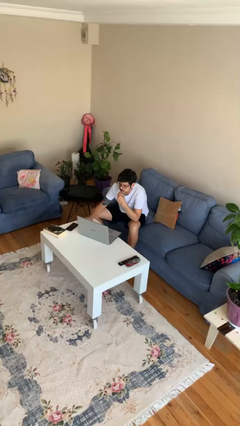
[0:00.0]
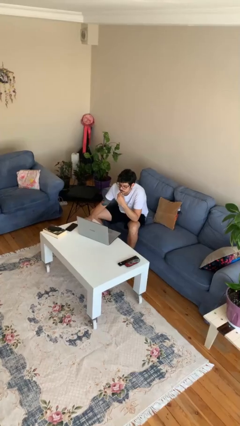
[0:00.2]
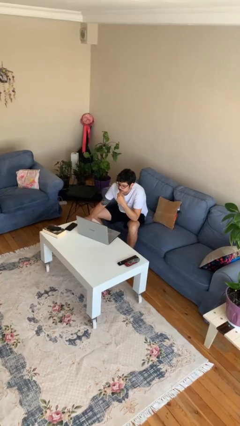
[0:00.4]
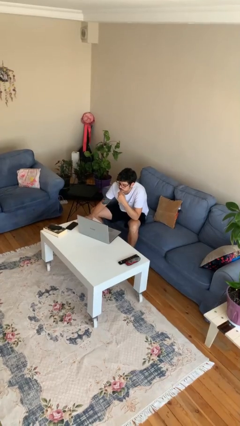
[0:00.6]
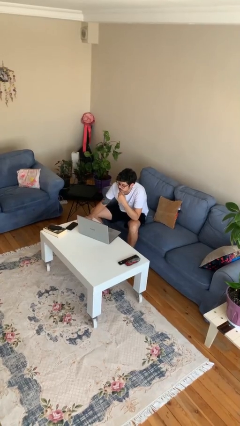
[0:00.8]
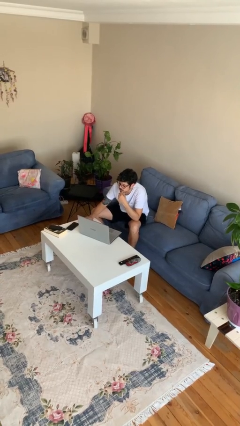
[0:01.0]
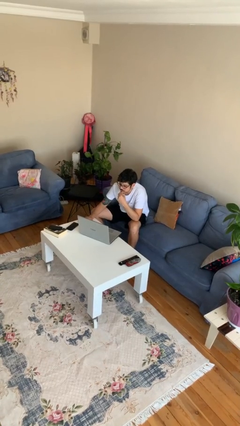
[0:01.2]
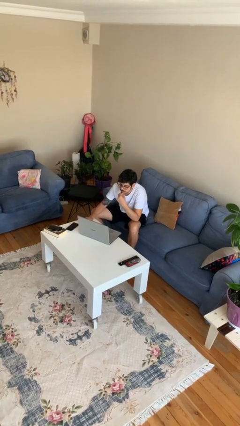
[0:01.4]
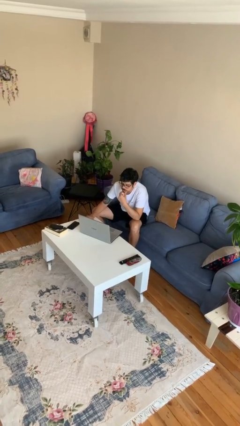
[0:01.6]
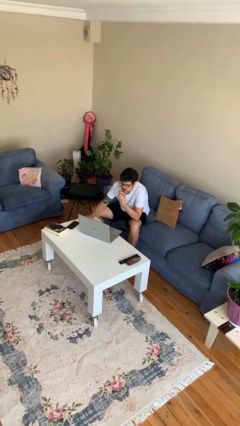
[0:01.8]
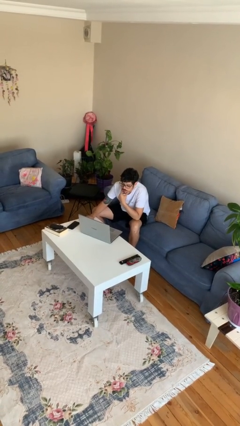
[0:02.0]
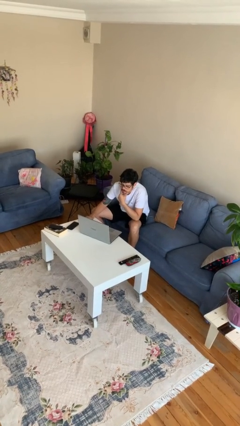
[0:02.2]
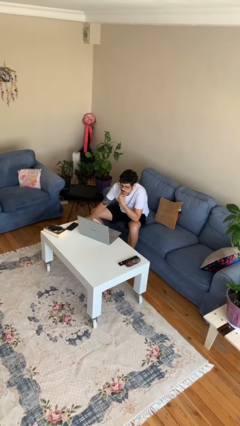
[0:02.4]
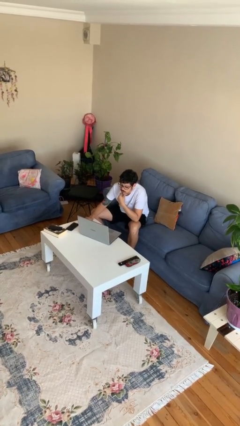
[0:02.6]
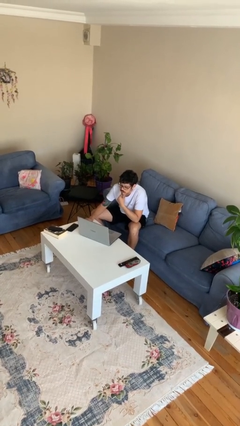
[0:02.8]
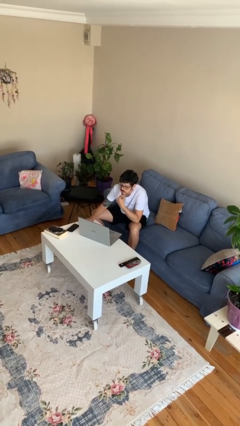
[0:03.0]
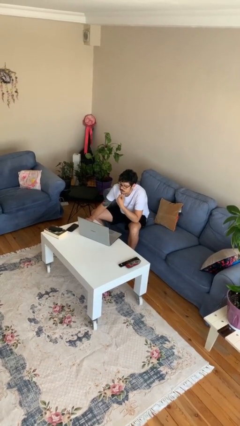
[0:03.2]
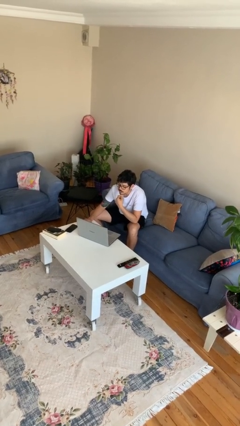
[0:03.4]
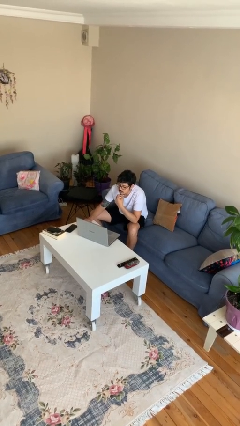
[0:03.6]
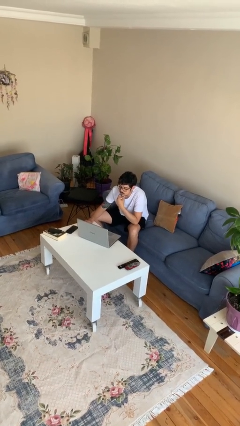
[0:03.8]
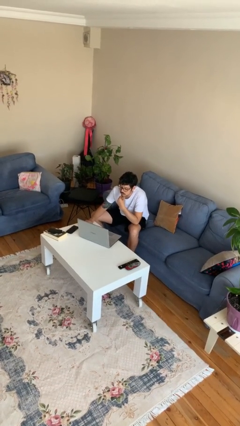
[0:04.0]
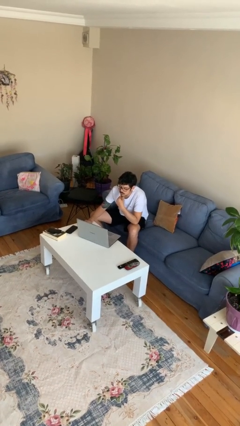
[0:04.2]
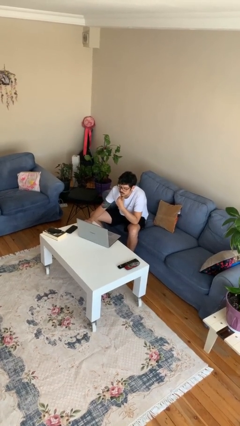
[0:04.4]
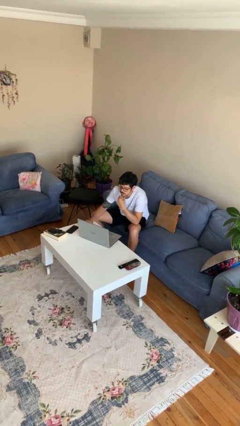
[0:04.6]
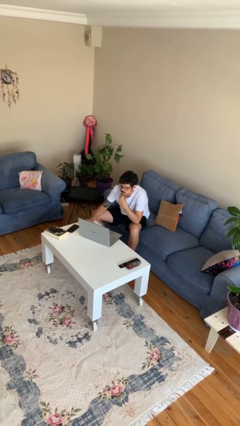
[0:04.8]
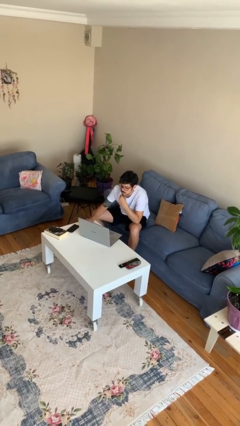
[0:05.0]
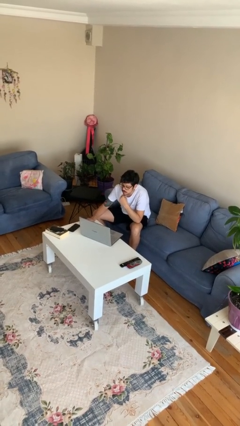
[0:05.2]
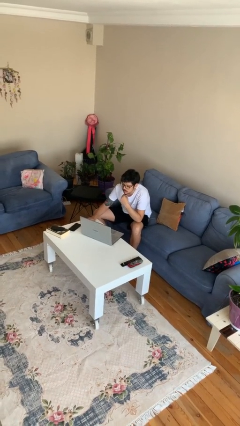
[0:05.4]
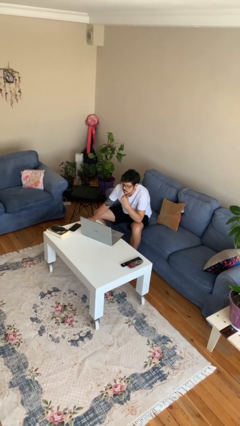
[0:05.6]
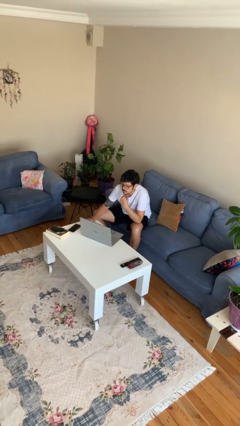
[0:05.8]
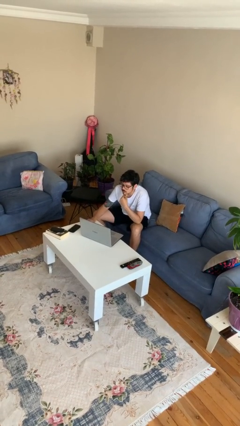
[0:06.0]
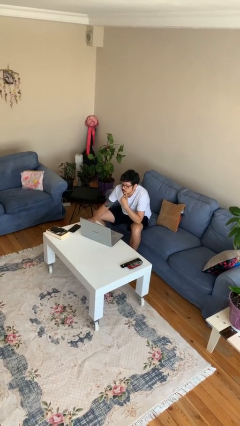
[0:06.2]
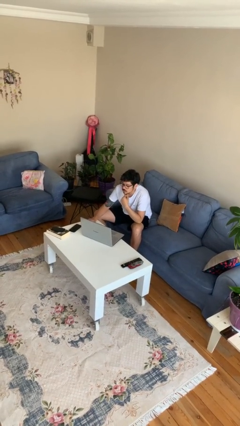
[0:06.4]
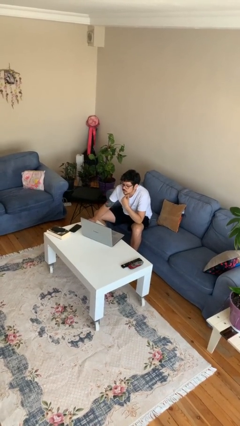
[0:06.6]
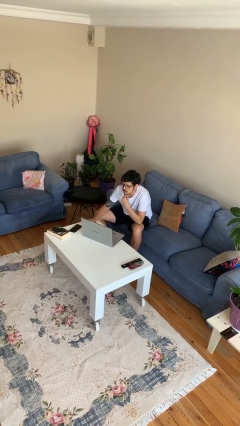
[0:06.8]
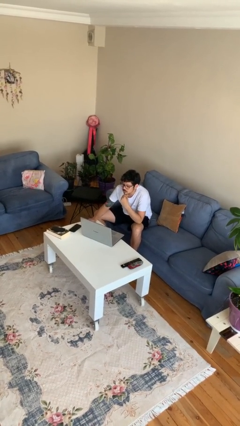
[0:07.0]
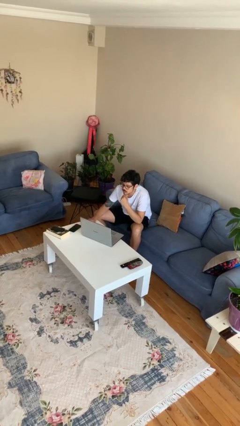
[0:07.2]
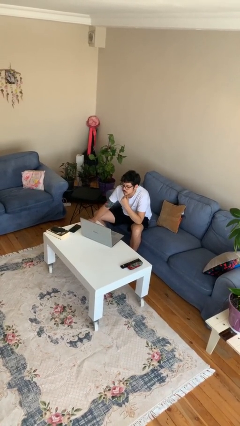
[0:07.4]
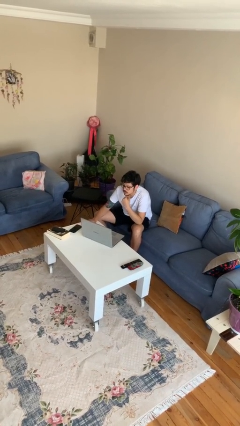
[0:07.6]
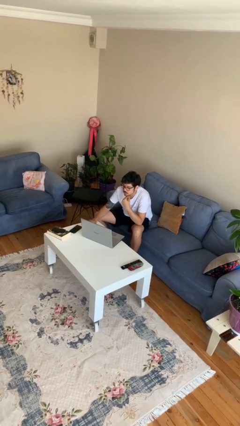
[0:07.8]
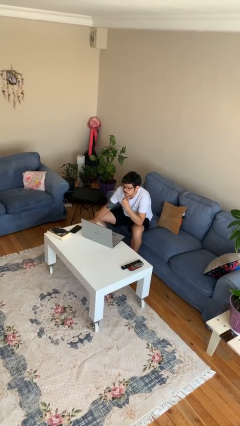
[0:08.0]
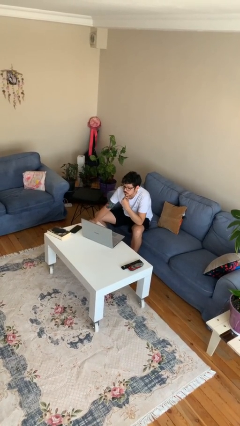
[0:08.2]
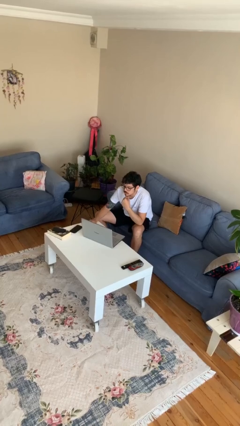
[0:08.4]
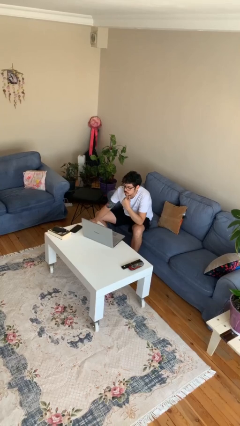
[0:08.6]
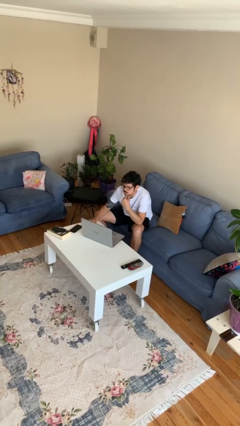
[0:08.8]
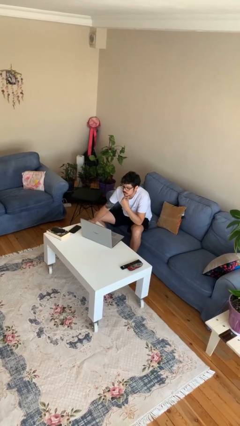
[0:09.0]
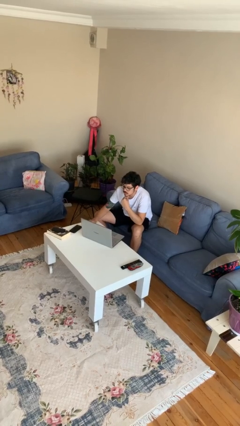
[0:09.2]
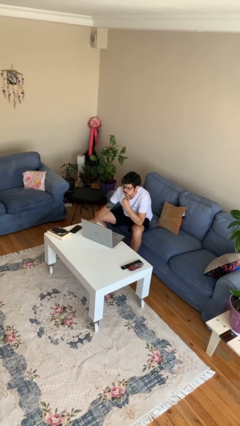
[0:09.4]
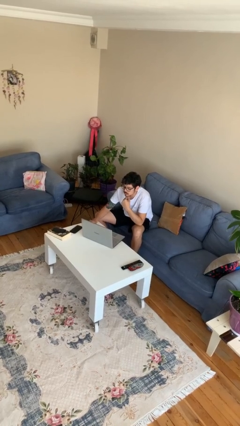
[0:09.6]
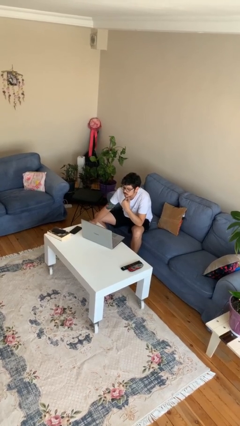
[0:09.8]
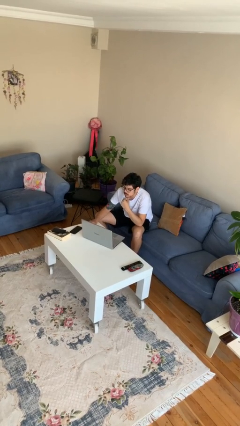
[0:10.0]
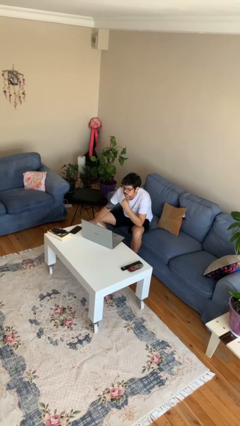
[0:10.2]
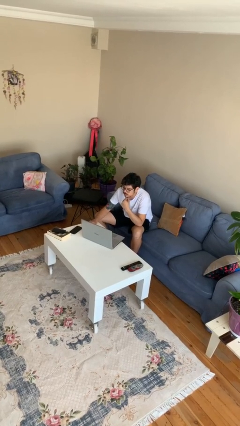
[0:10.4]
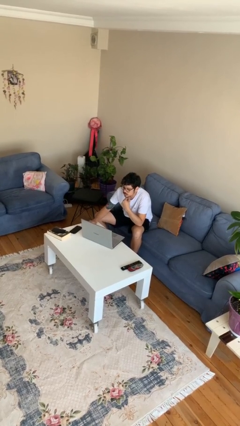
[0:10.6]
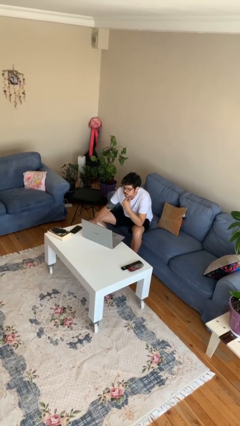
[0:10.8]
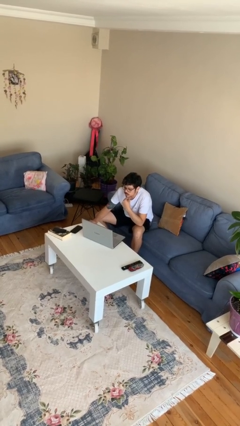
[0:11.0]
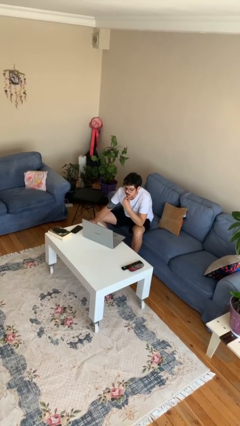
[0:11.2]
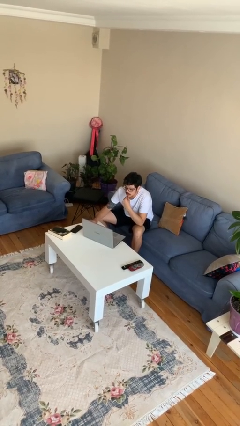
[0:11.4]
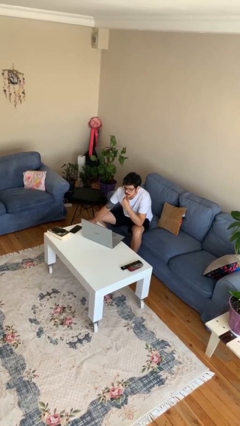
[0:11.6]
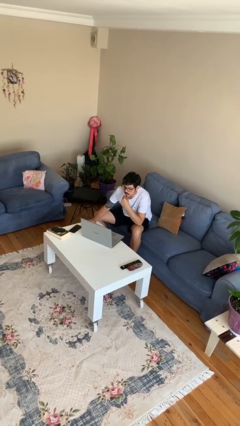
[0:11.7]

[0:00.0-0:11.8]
person interacts with laptop

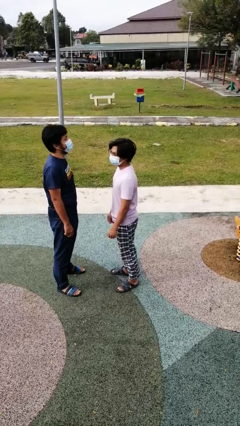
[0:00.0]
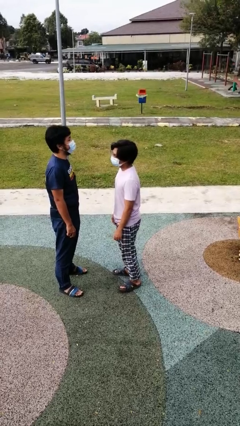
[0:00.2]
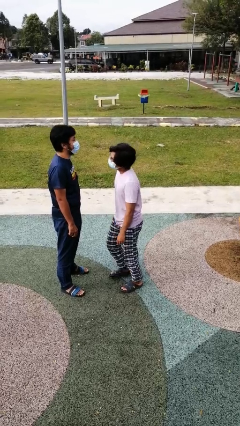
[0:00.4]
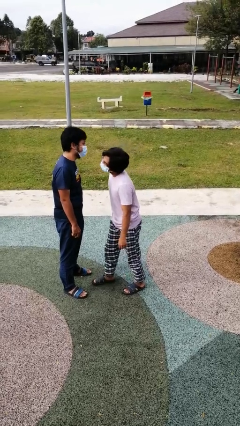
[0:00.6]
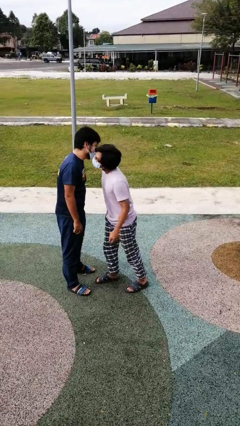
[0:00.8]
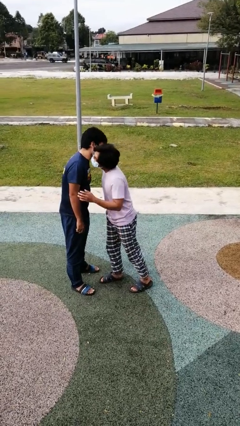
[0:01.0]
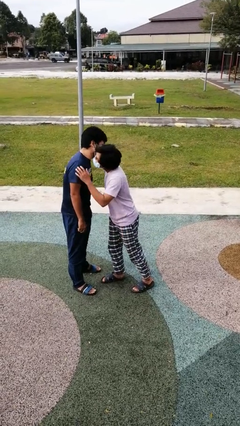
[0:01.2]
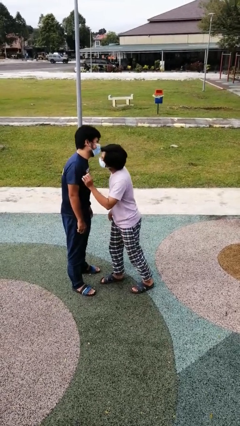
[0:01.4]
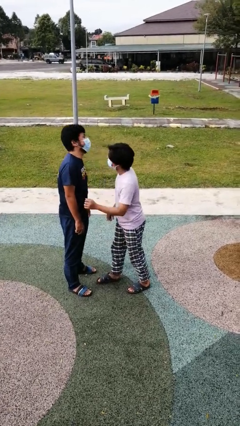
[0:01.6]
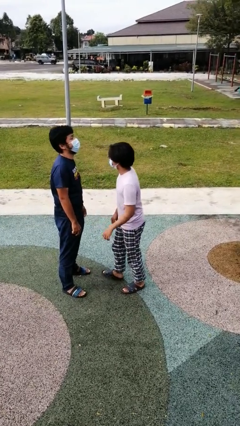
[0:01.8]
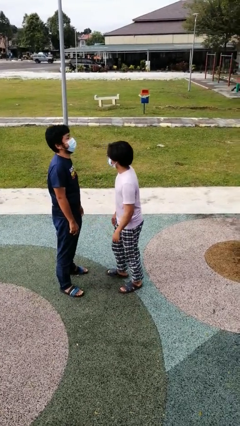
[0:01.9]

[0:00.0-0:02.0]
person kisses cheek of person

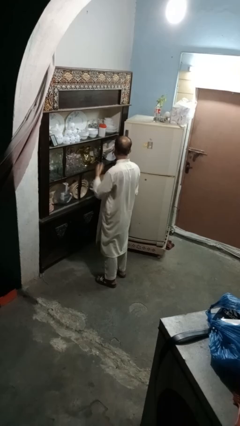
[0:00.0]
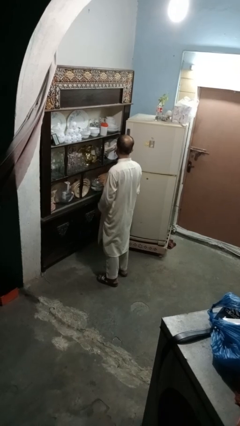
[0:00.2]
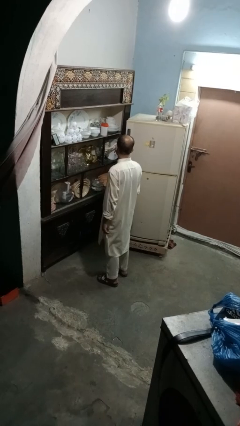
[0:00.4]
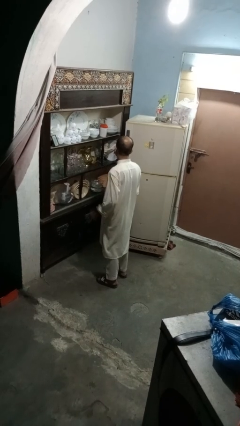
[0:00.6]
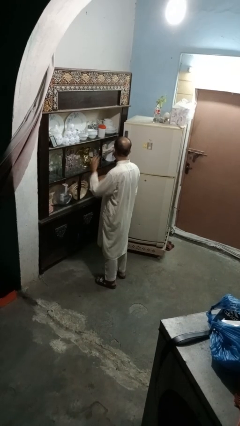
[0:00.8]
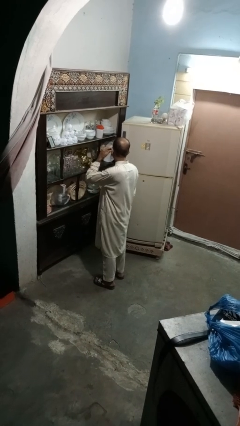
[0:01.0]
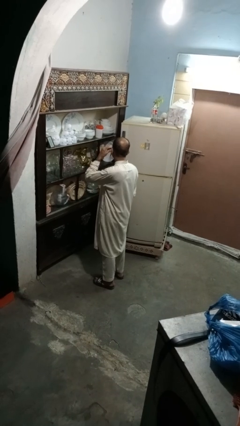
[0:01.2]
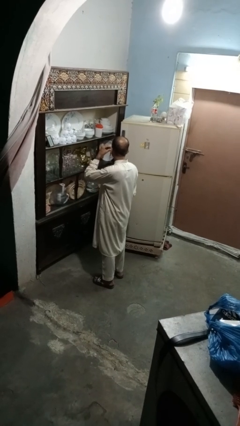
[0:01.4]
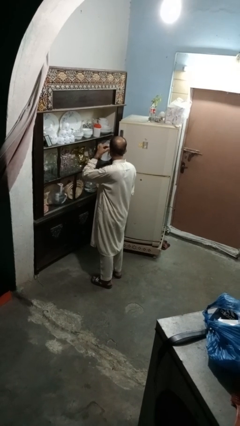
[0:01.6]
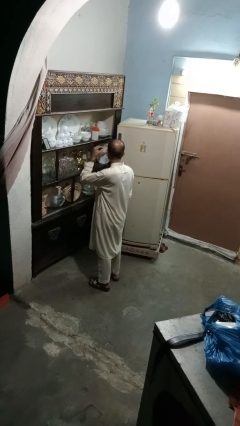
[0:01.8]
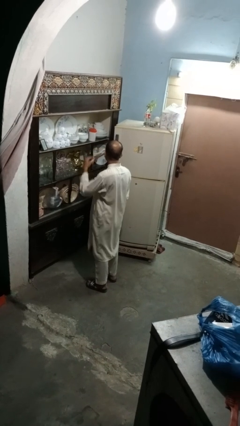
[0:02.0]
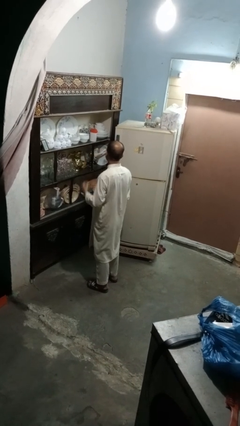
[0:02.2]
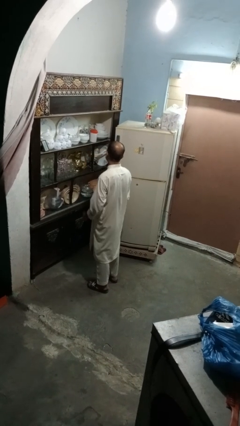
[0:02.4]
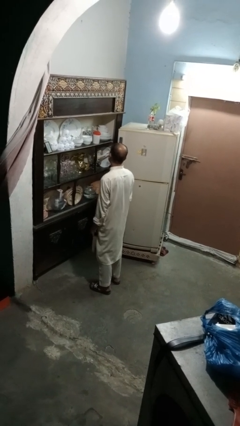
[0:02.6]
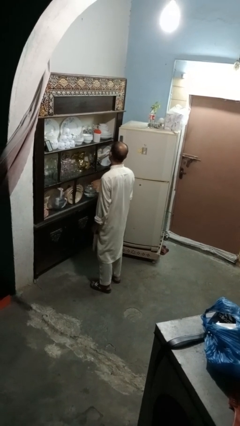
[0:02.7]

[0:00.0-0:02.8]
person takes off earrings

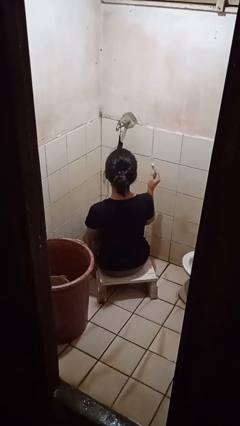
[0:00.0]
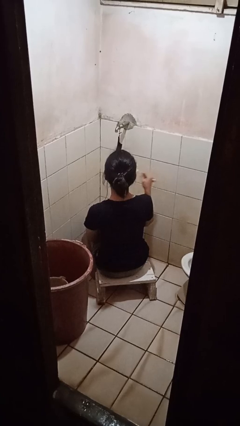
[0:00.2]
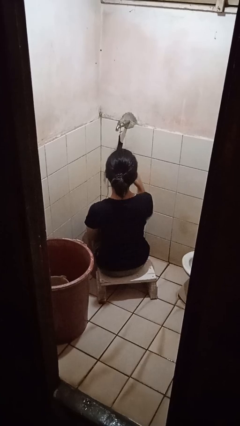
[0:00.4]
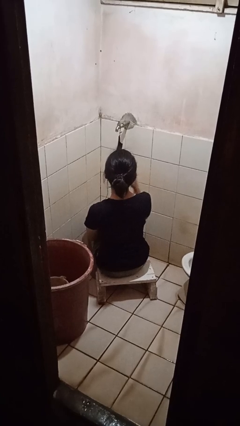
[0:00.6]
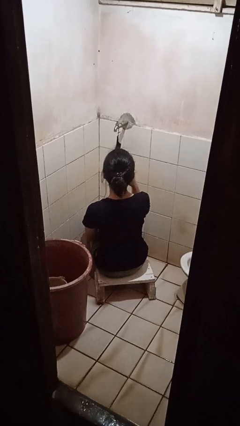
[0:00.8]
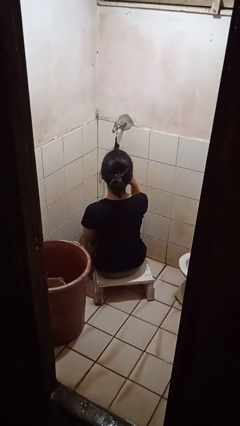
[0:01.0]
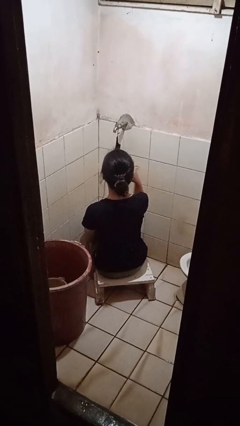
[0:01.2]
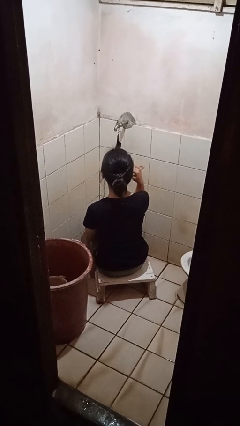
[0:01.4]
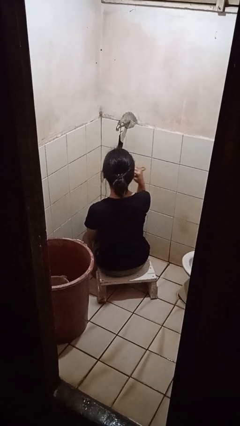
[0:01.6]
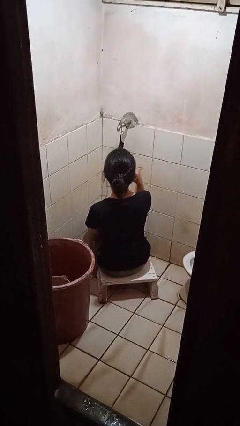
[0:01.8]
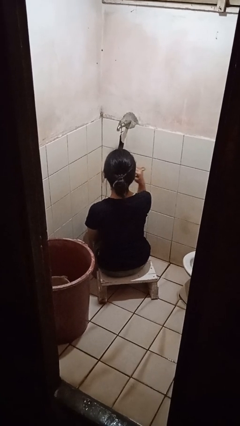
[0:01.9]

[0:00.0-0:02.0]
person brushes teeth
